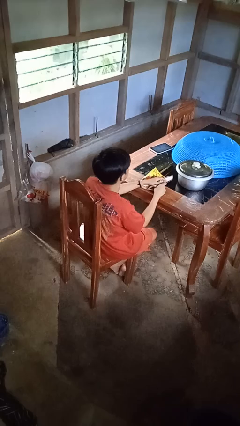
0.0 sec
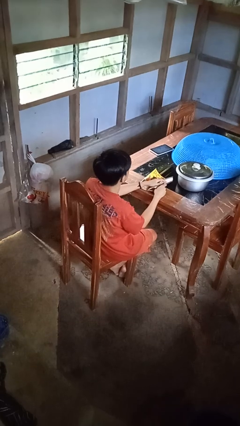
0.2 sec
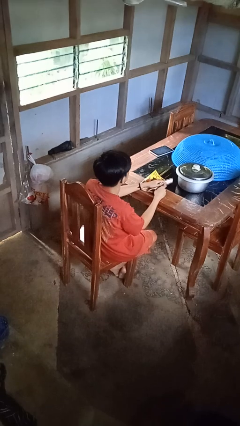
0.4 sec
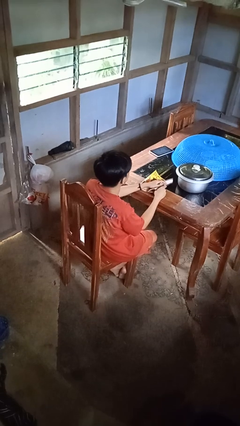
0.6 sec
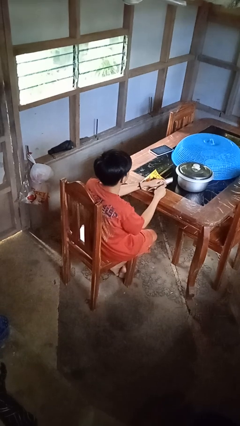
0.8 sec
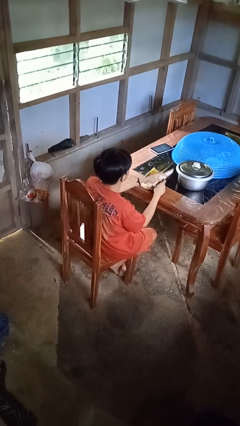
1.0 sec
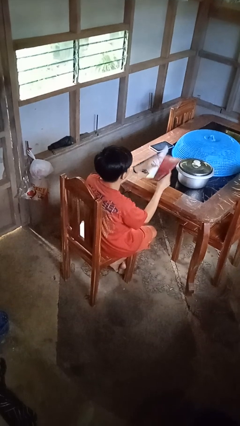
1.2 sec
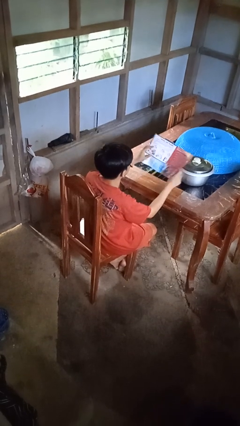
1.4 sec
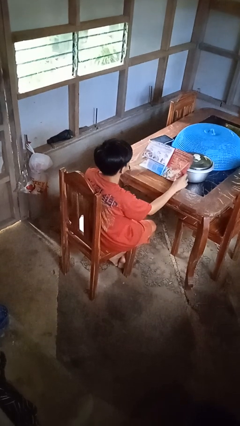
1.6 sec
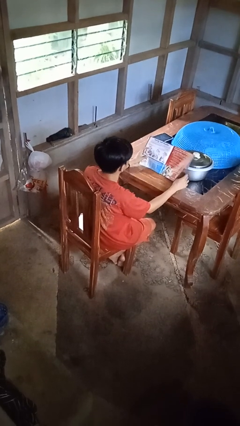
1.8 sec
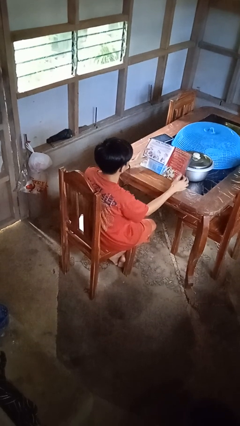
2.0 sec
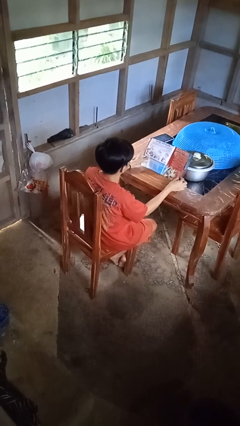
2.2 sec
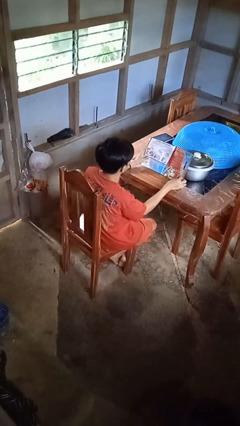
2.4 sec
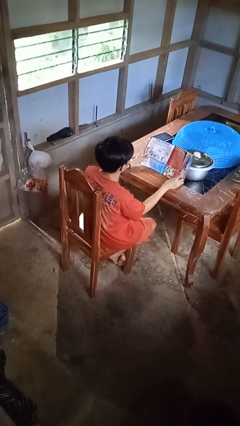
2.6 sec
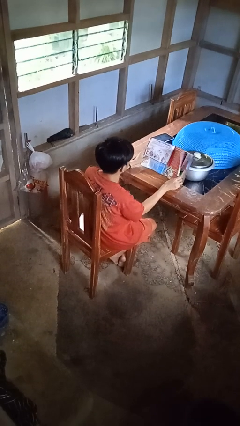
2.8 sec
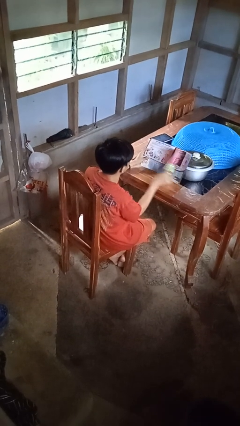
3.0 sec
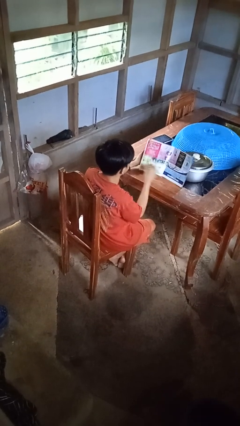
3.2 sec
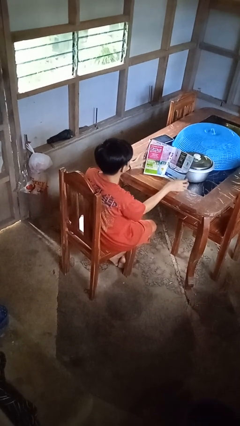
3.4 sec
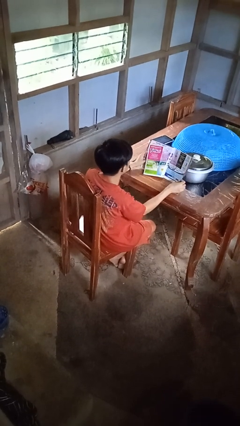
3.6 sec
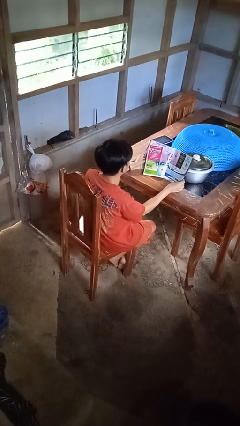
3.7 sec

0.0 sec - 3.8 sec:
person reads magazine

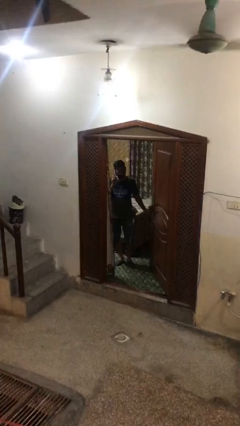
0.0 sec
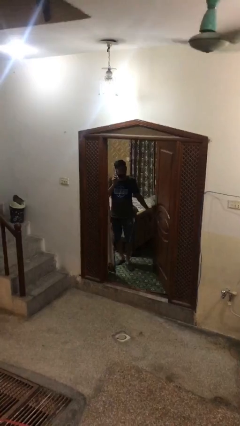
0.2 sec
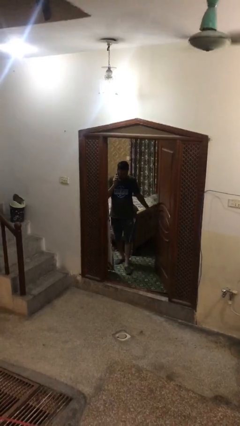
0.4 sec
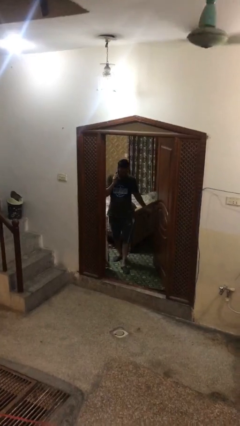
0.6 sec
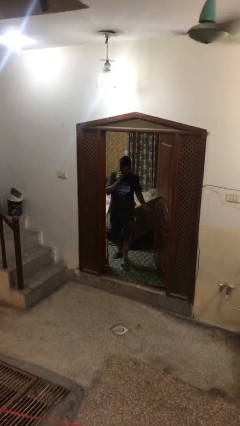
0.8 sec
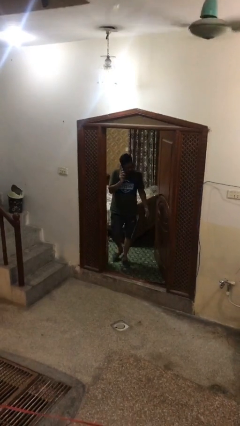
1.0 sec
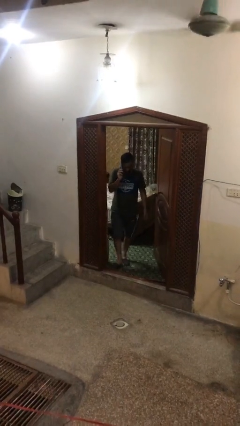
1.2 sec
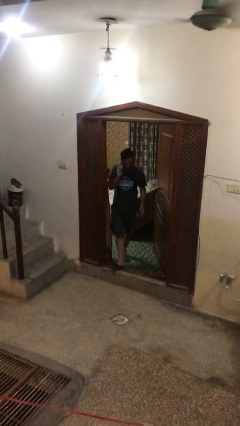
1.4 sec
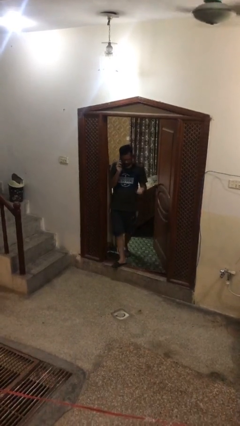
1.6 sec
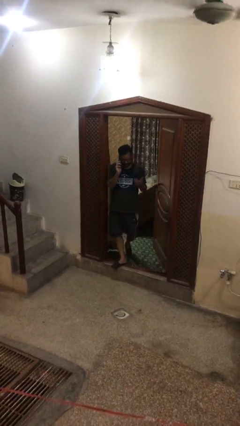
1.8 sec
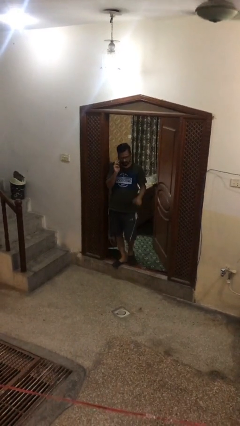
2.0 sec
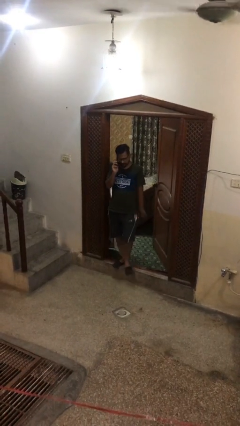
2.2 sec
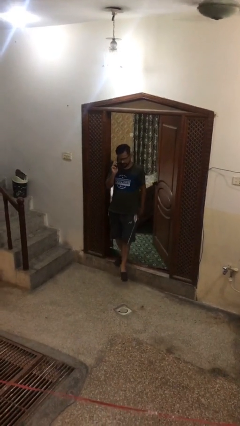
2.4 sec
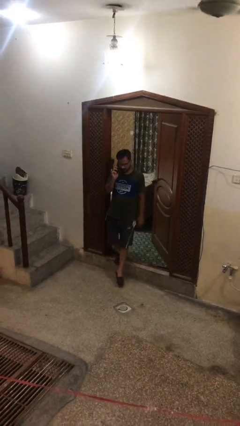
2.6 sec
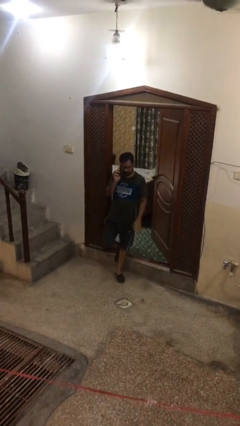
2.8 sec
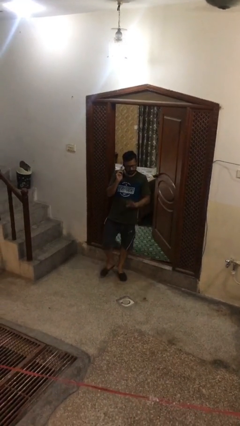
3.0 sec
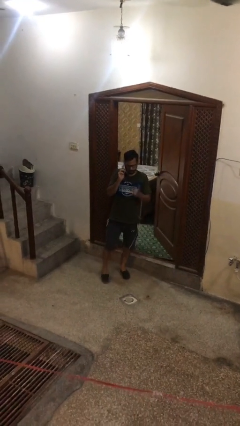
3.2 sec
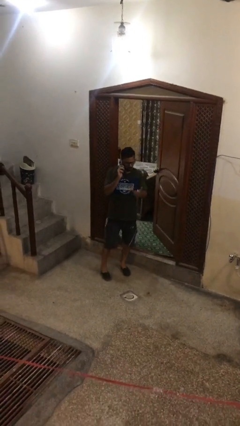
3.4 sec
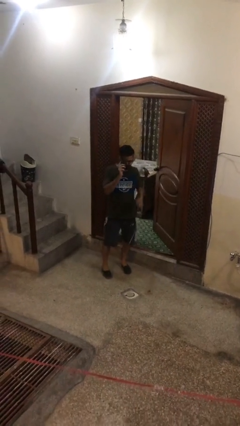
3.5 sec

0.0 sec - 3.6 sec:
person enters scene through structure

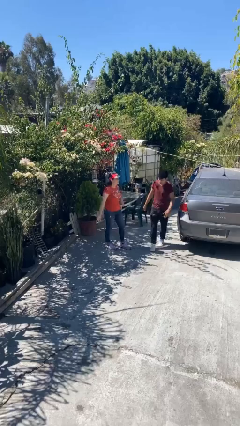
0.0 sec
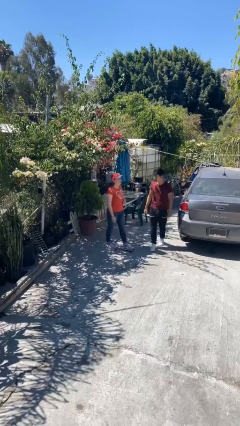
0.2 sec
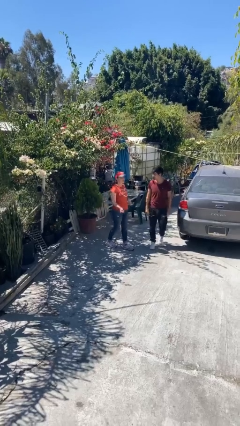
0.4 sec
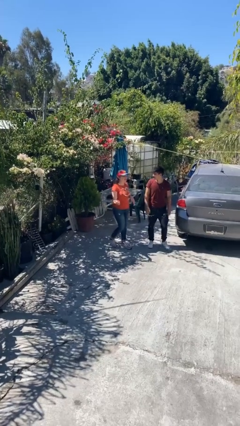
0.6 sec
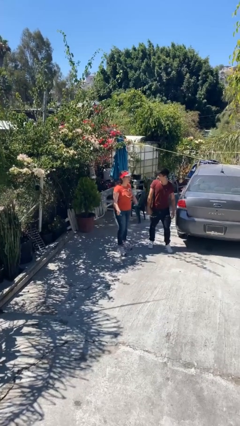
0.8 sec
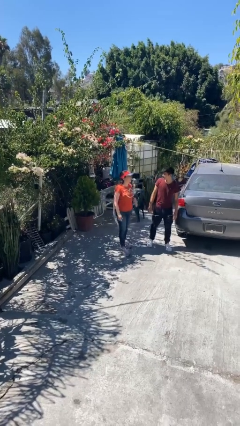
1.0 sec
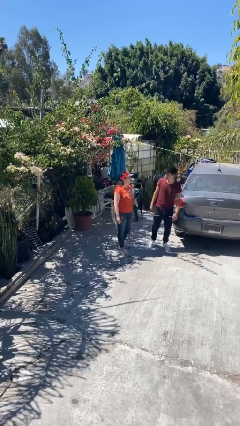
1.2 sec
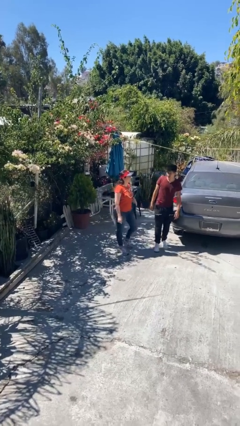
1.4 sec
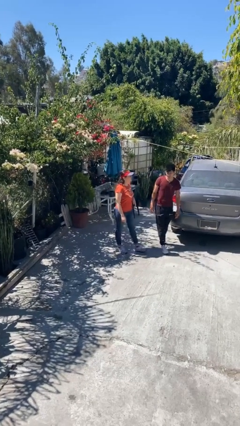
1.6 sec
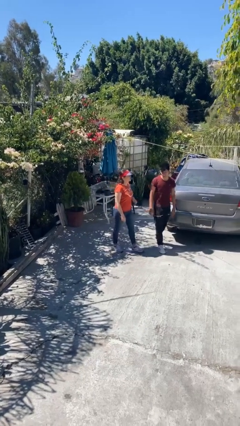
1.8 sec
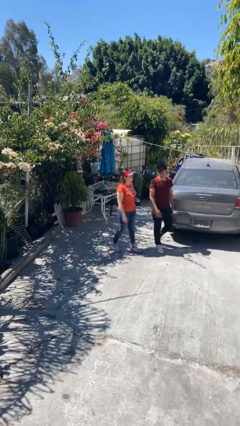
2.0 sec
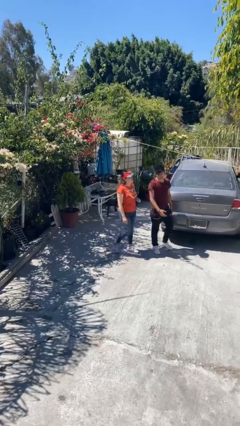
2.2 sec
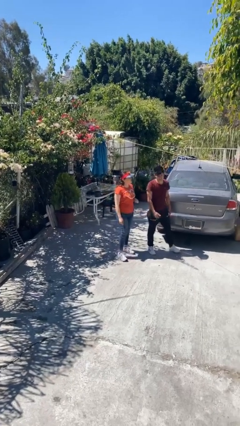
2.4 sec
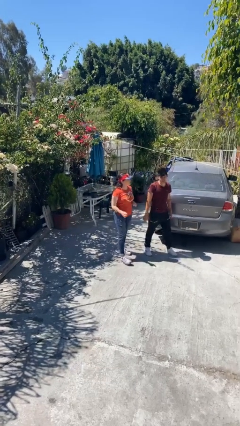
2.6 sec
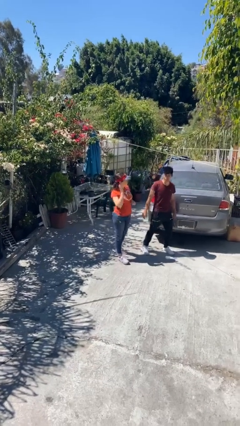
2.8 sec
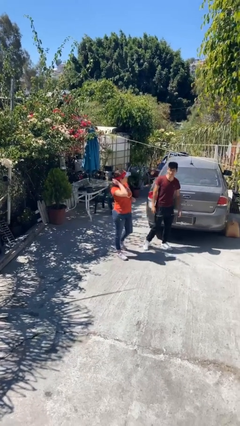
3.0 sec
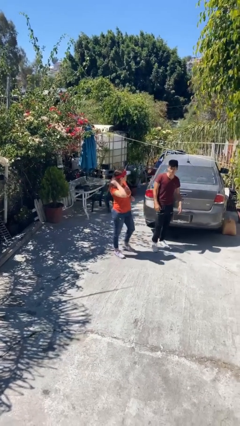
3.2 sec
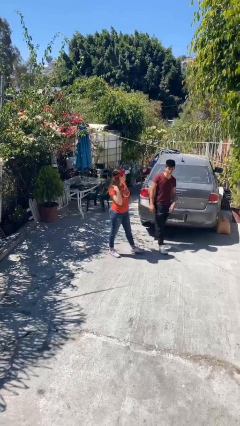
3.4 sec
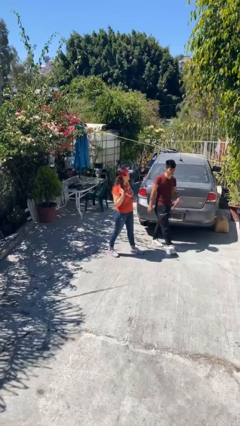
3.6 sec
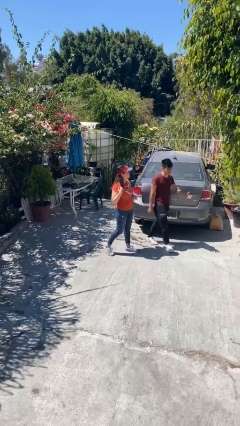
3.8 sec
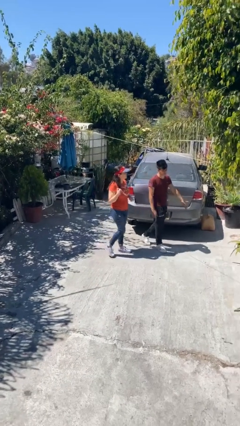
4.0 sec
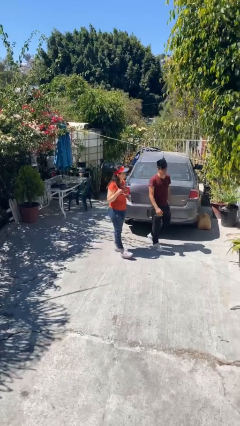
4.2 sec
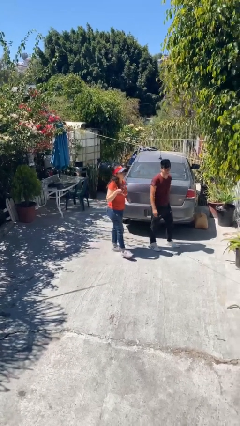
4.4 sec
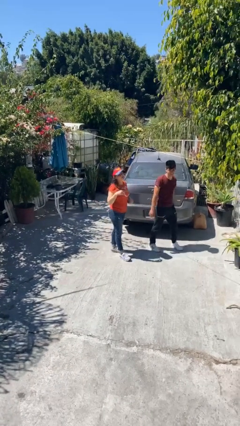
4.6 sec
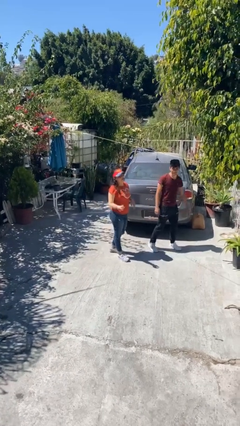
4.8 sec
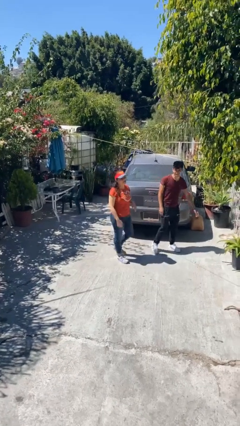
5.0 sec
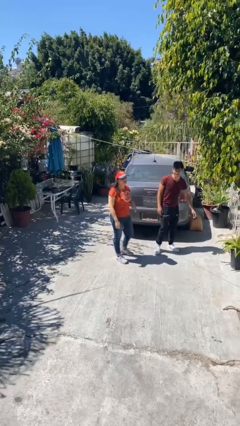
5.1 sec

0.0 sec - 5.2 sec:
person talks to person

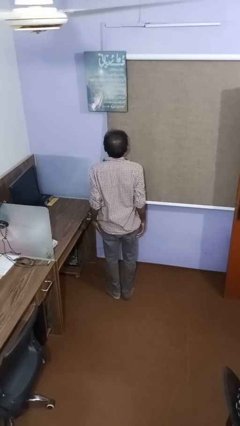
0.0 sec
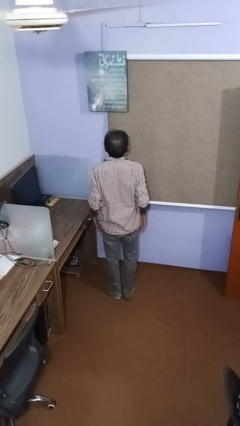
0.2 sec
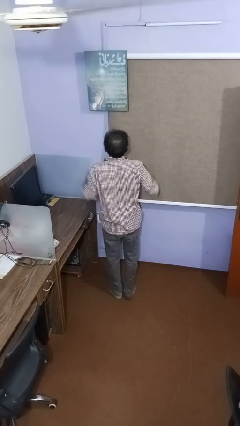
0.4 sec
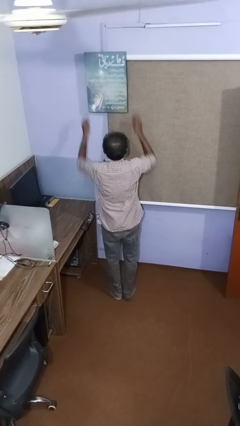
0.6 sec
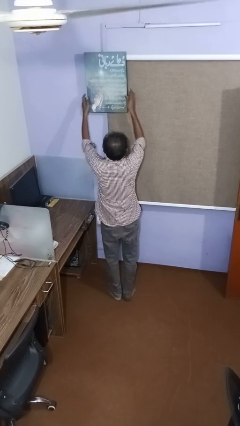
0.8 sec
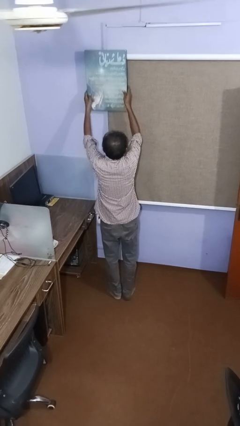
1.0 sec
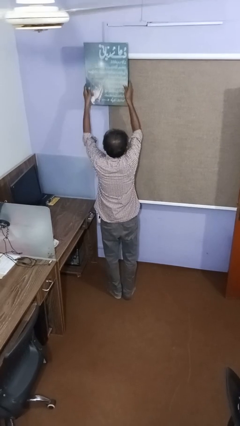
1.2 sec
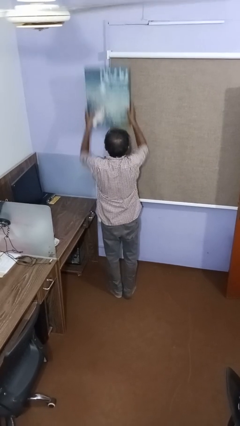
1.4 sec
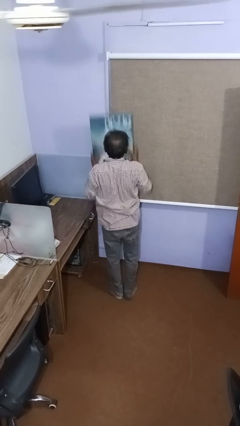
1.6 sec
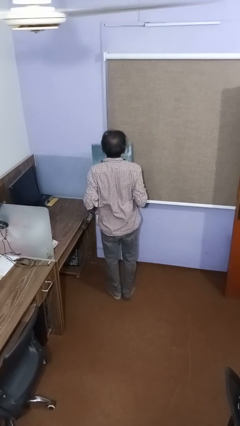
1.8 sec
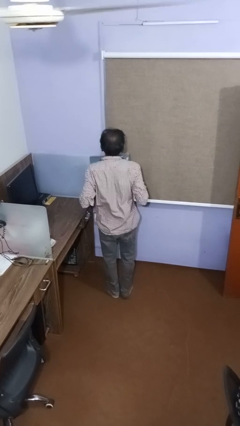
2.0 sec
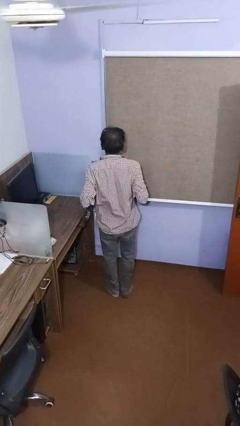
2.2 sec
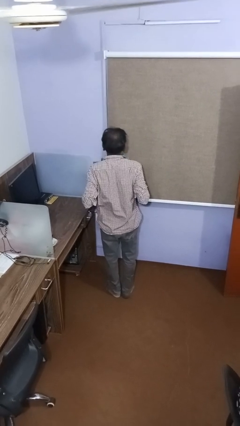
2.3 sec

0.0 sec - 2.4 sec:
person takes down picture frame

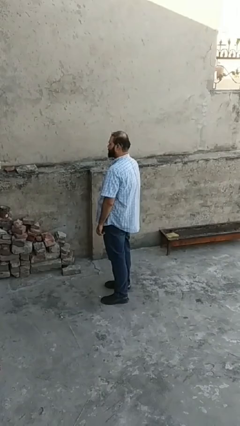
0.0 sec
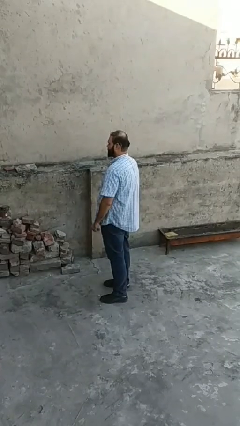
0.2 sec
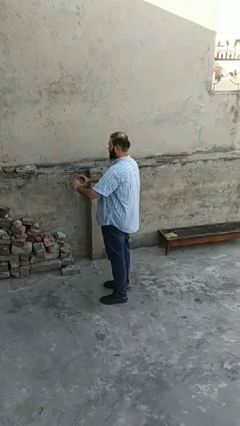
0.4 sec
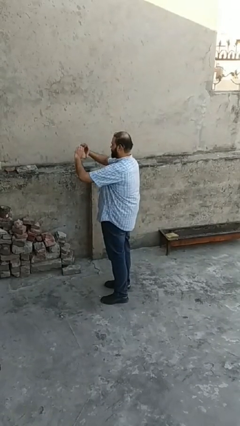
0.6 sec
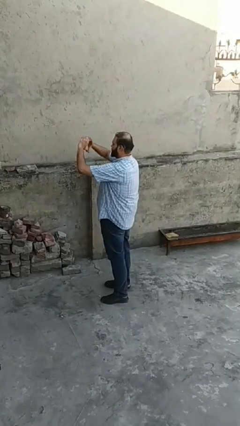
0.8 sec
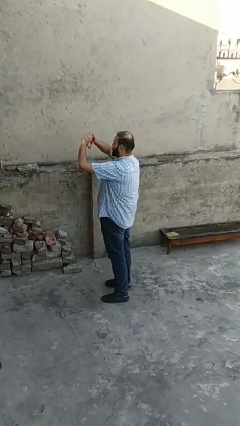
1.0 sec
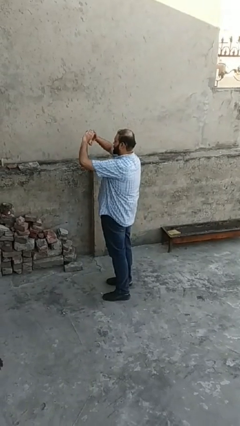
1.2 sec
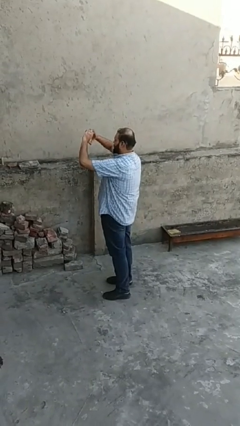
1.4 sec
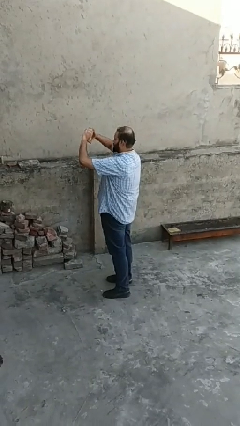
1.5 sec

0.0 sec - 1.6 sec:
person gestures heart

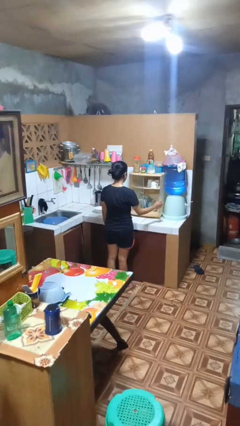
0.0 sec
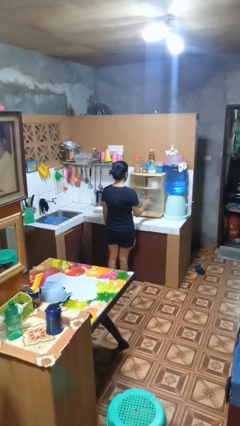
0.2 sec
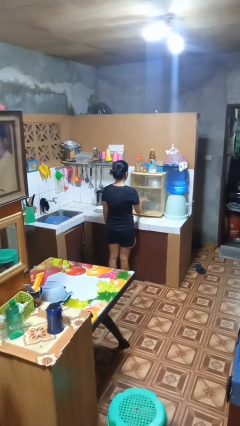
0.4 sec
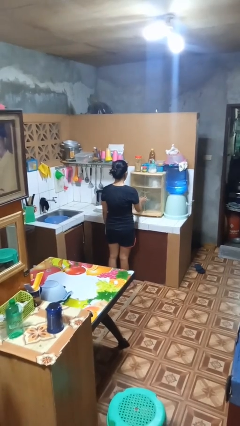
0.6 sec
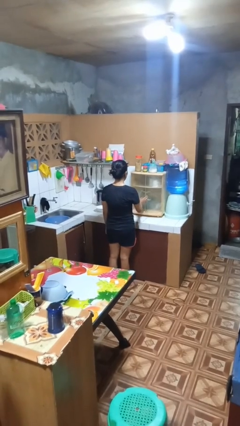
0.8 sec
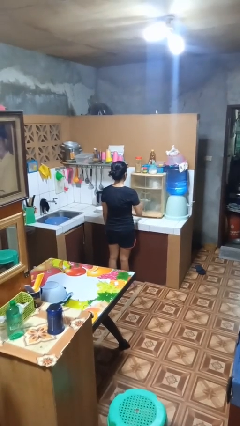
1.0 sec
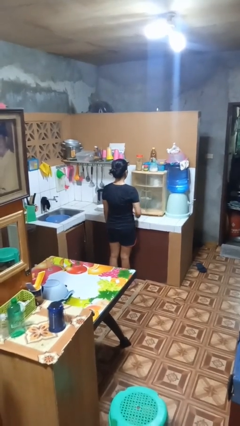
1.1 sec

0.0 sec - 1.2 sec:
person closes kitchen drawer
